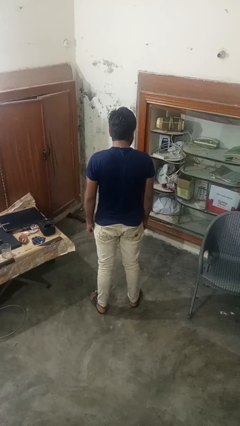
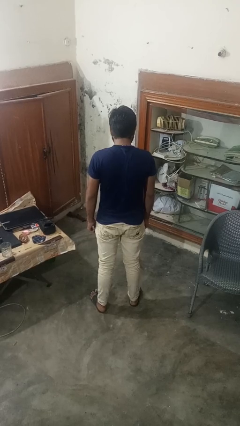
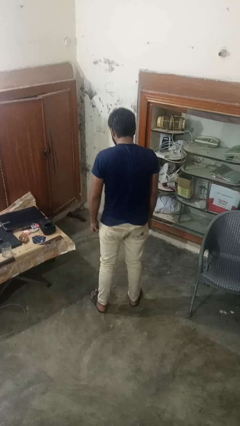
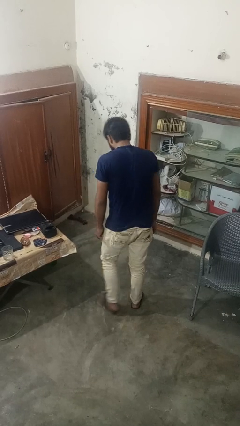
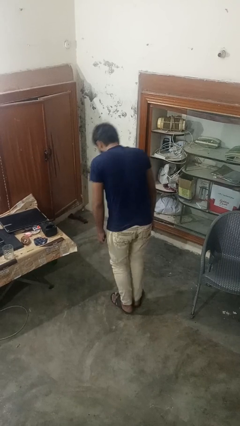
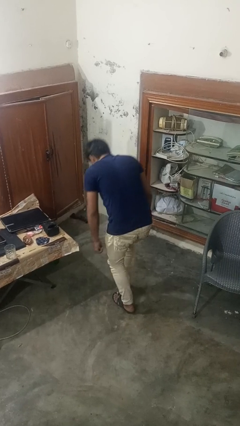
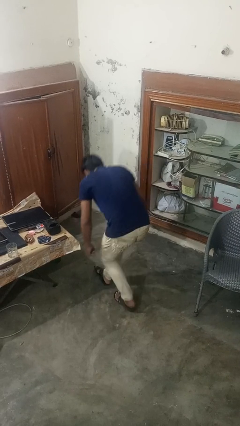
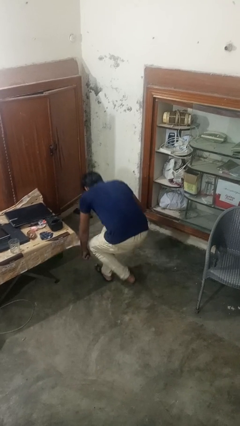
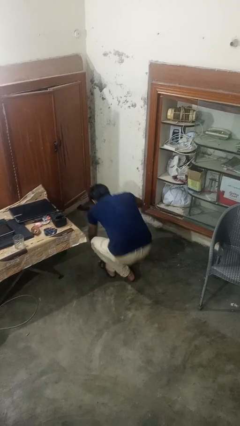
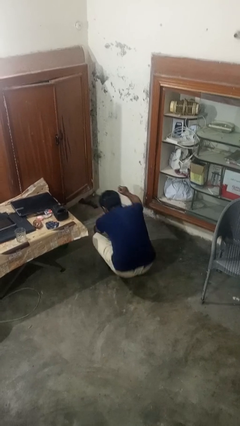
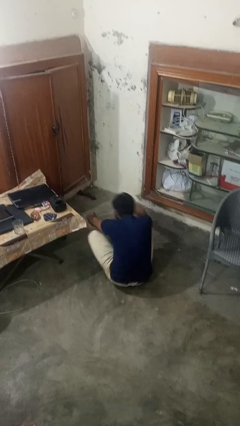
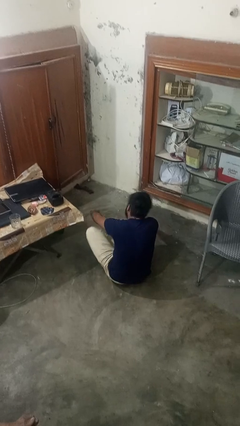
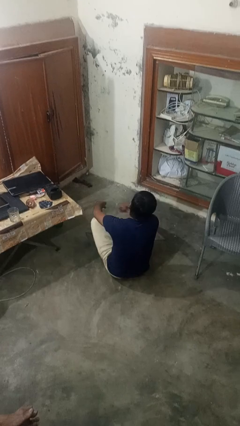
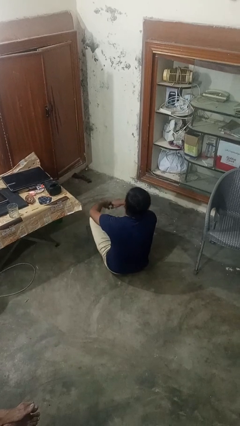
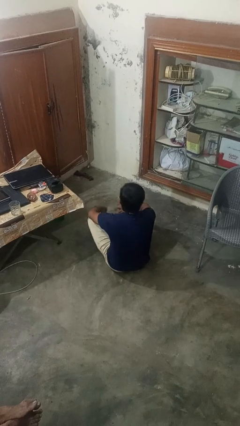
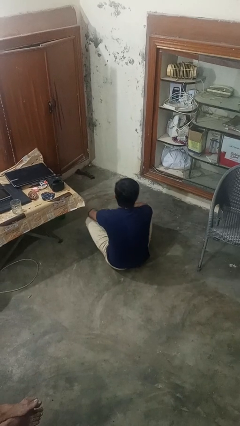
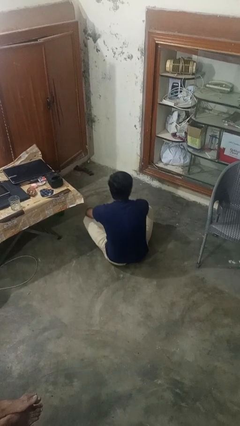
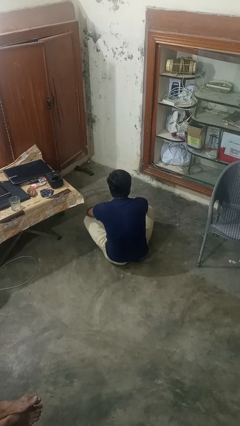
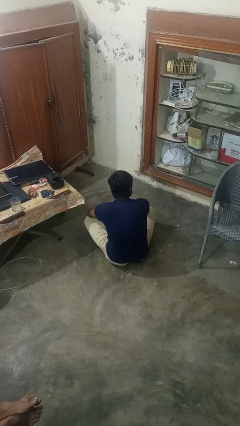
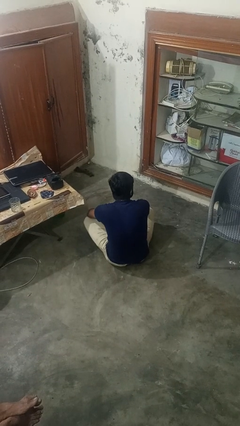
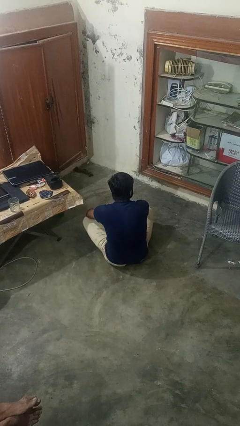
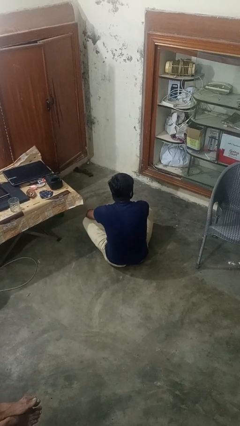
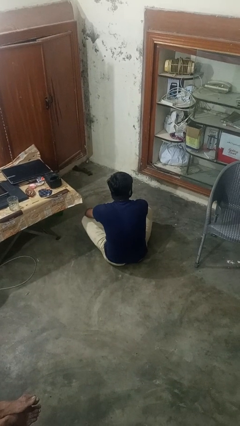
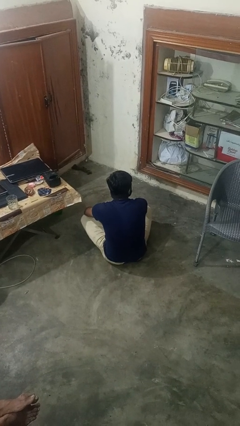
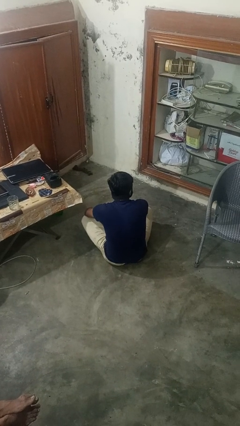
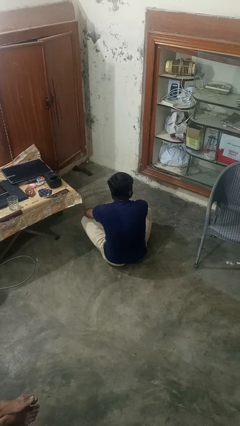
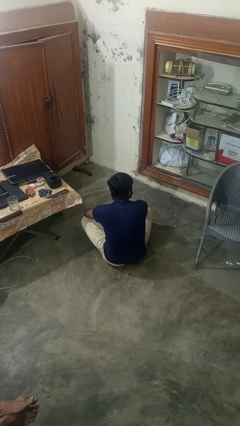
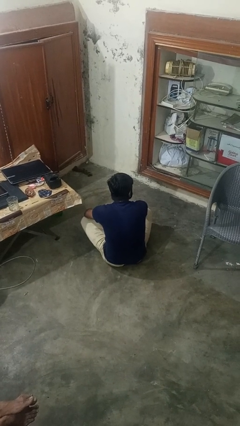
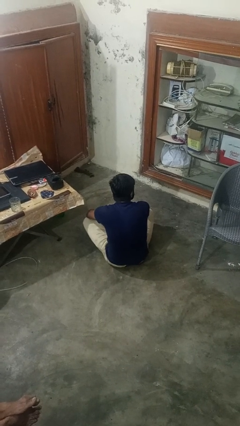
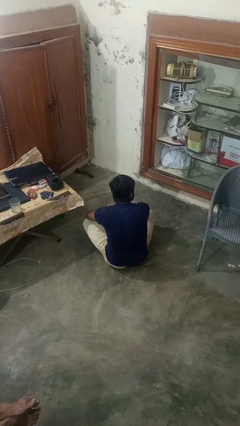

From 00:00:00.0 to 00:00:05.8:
person sits crisscross

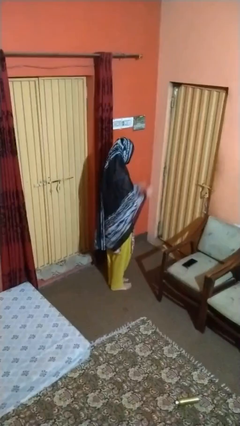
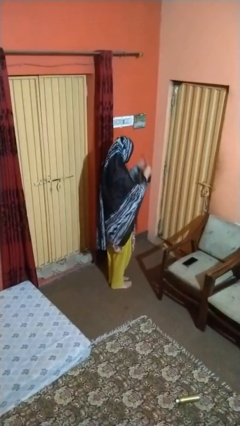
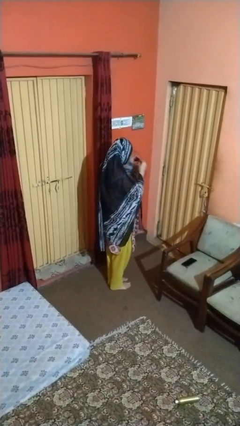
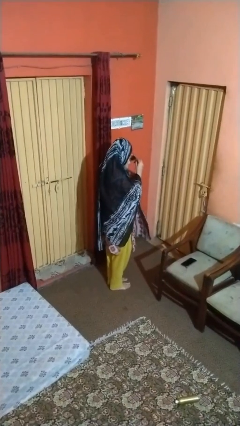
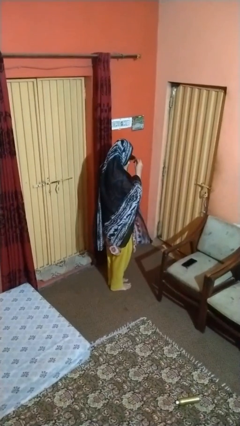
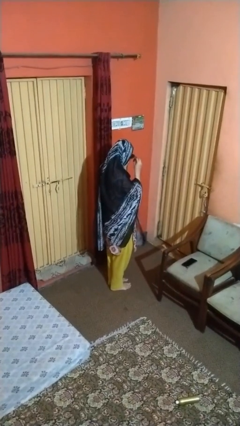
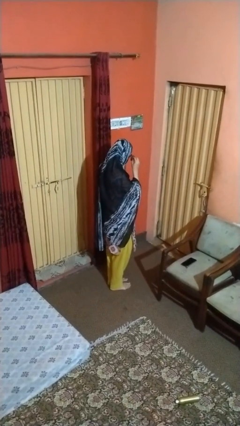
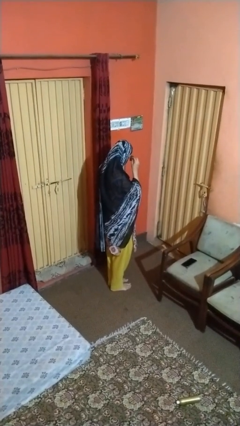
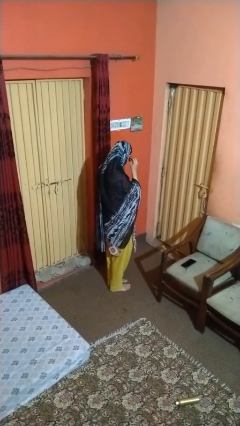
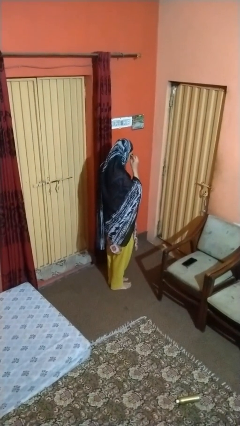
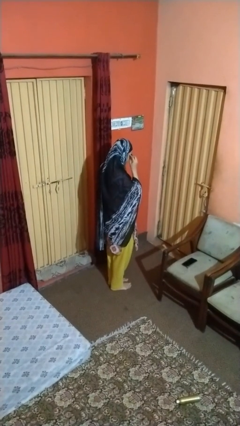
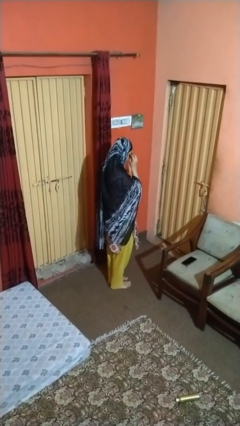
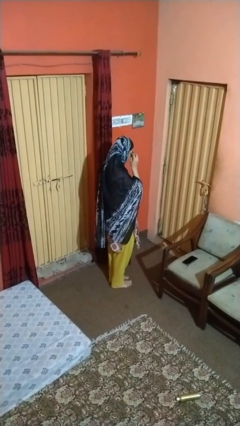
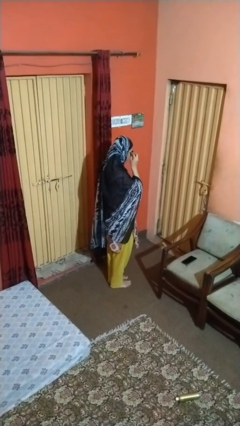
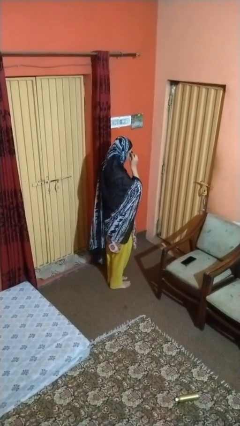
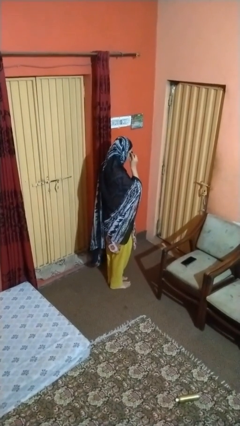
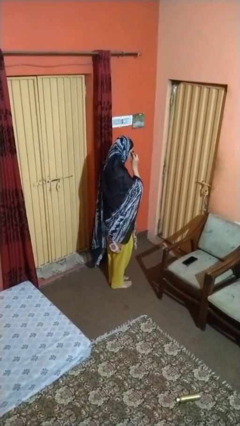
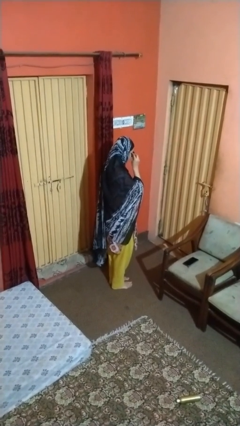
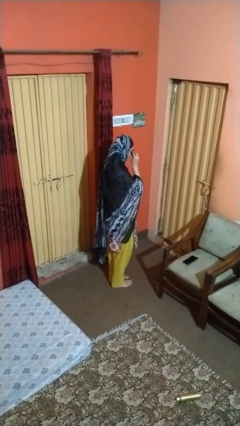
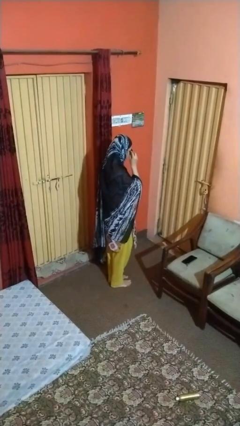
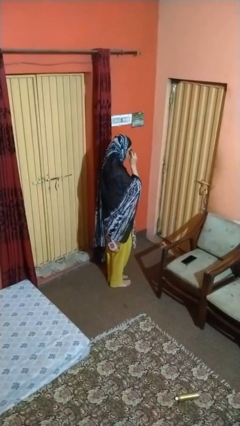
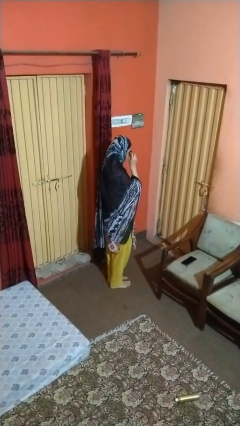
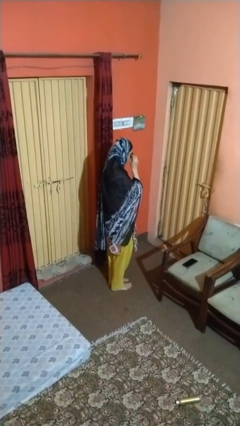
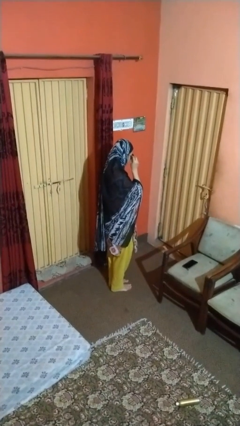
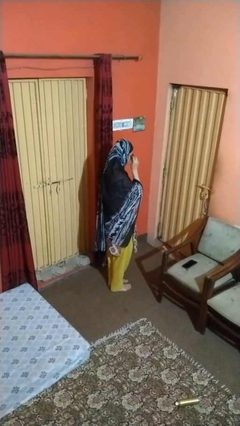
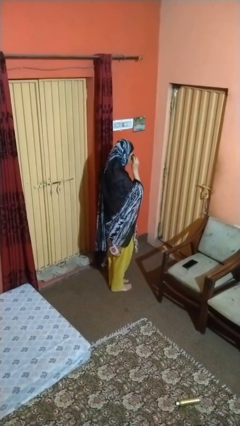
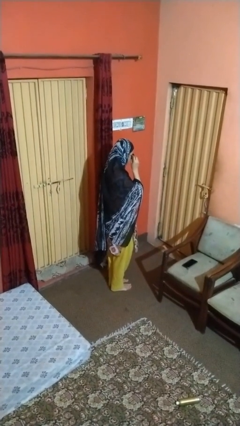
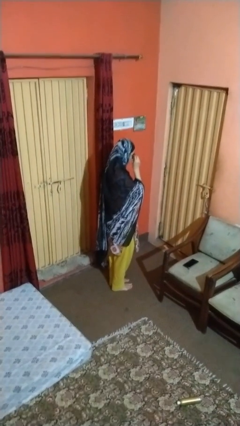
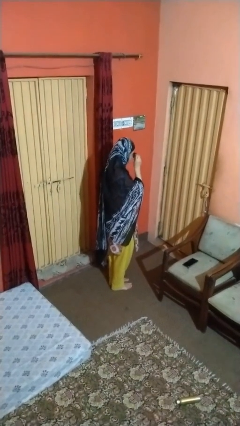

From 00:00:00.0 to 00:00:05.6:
person puts on sunglasses

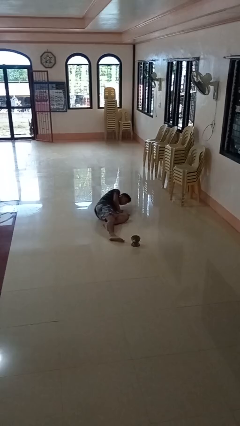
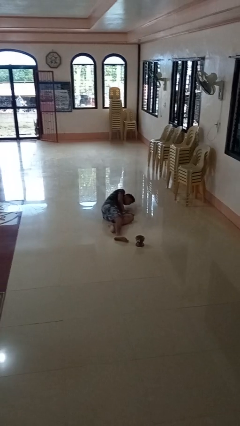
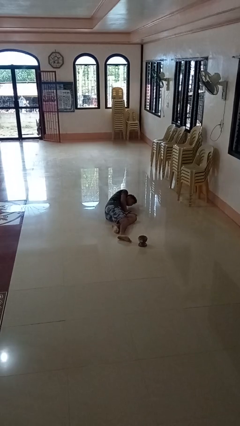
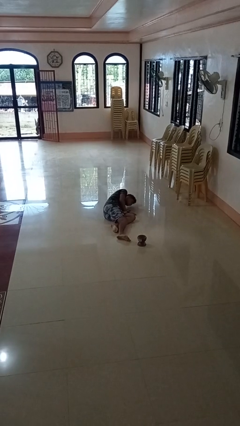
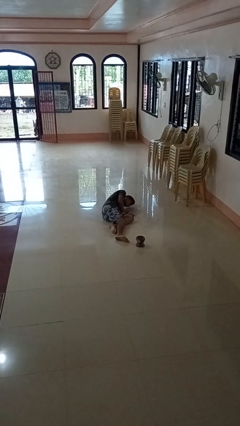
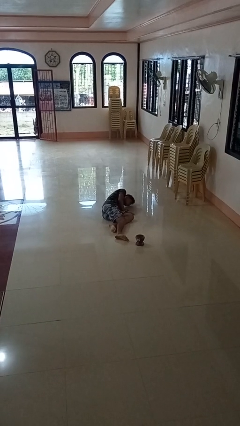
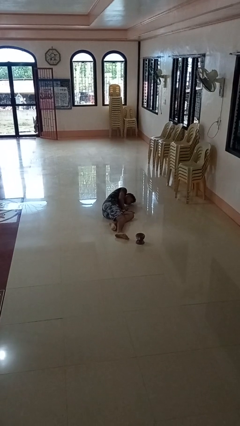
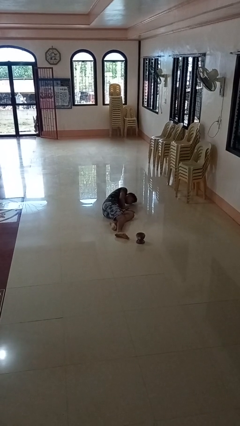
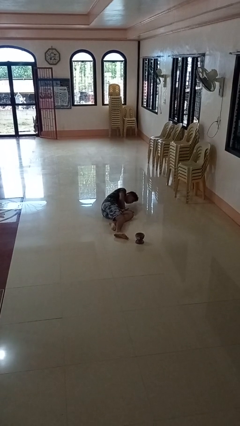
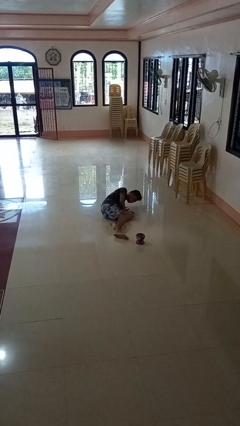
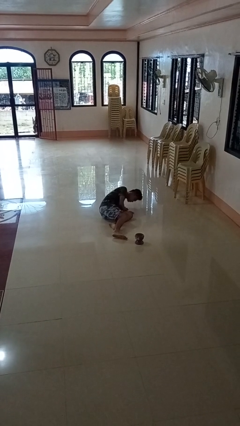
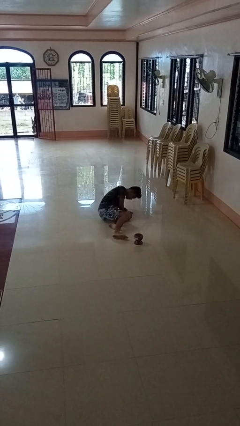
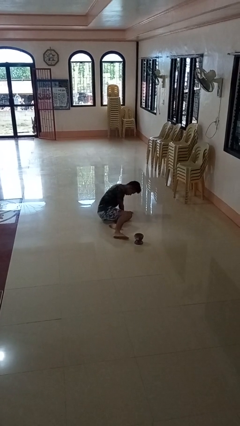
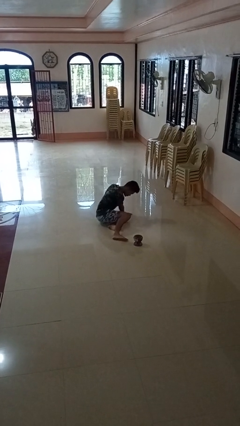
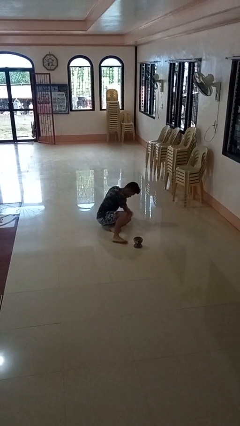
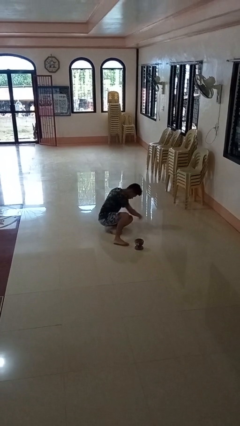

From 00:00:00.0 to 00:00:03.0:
person lies down on floor

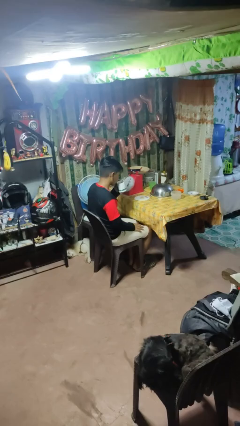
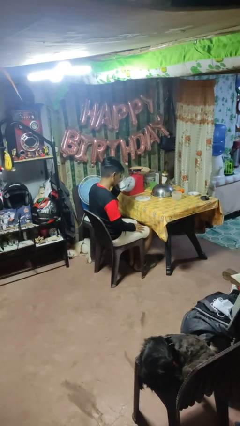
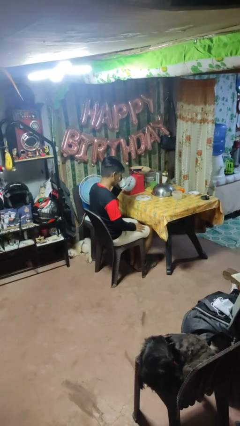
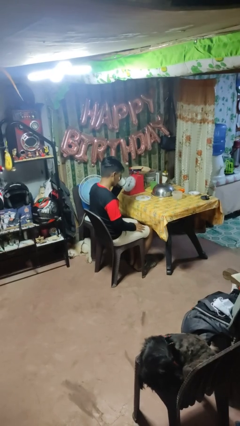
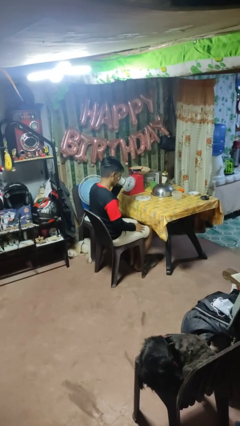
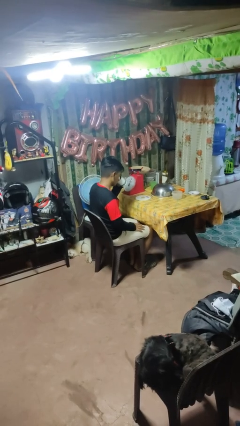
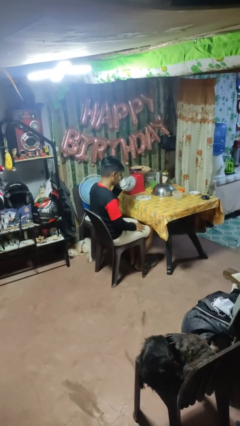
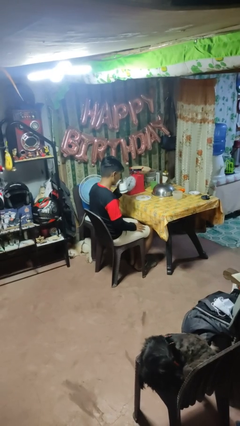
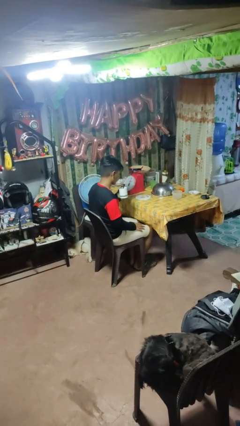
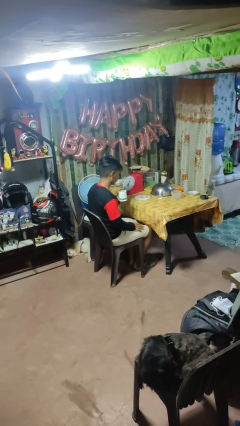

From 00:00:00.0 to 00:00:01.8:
person drinks from mug

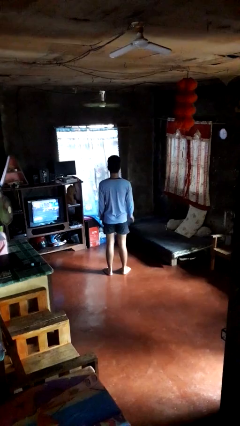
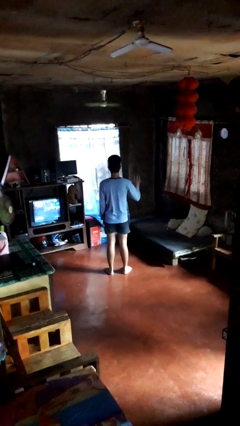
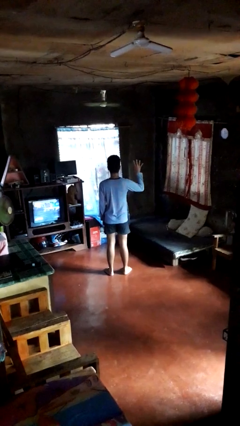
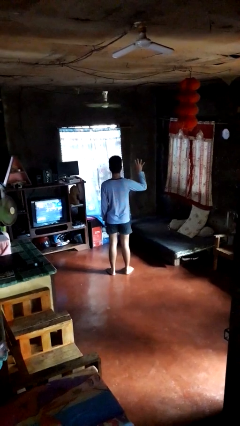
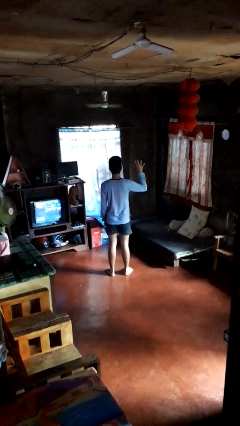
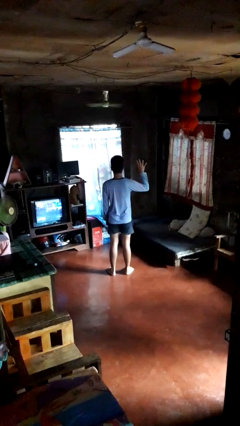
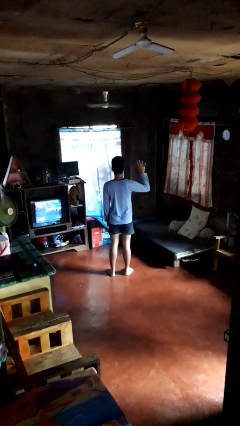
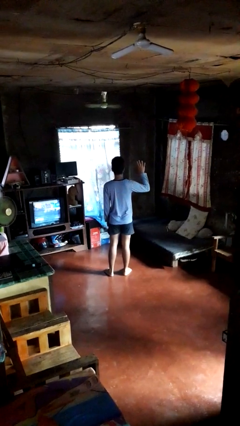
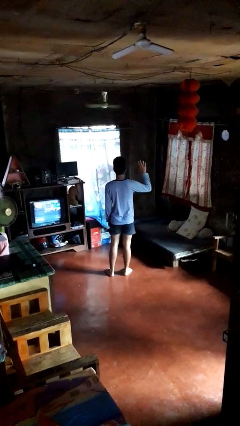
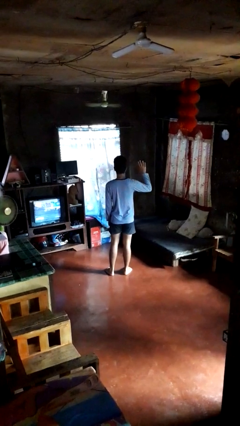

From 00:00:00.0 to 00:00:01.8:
person gestures number four
